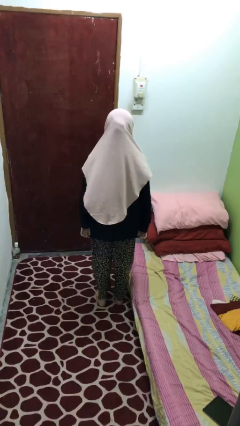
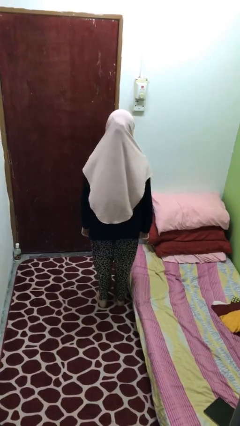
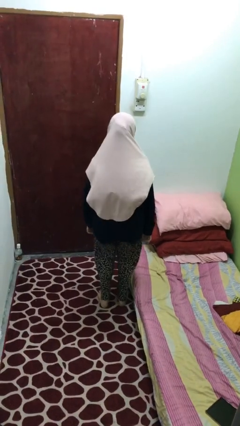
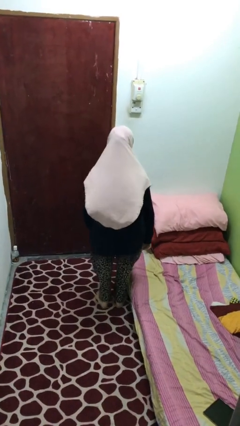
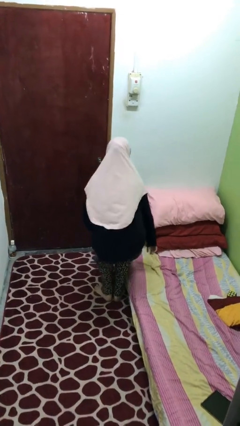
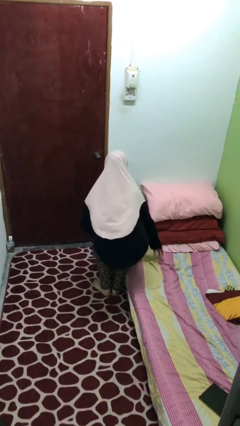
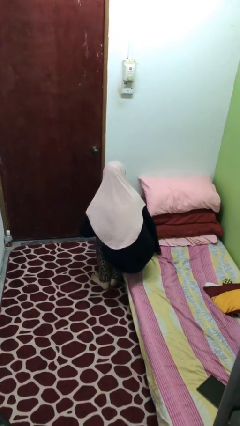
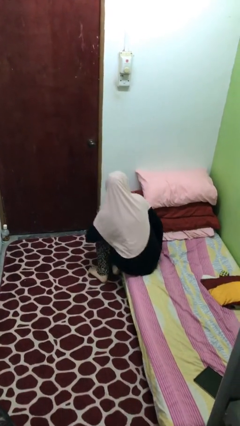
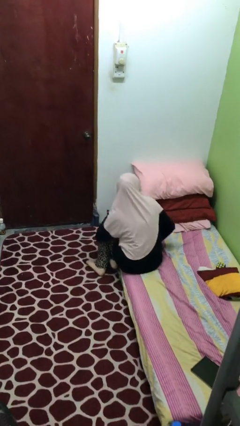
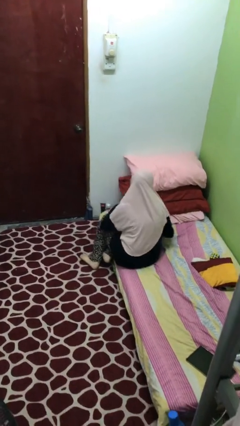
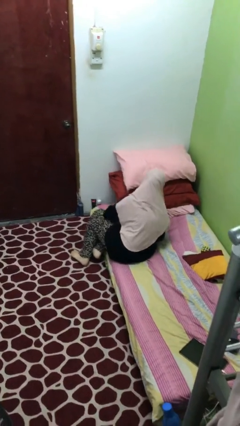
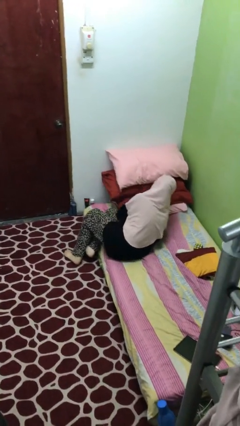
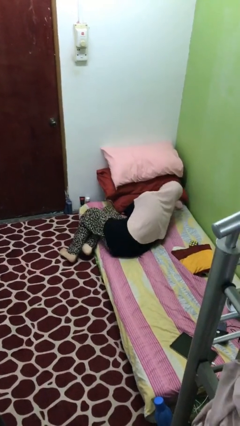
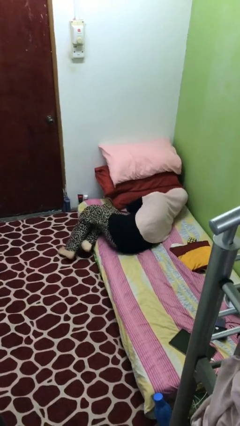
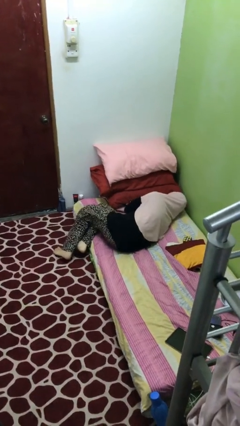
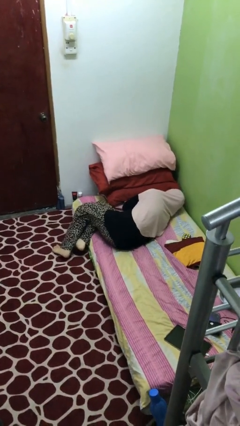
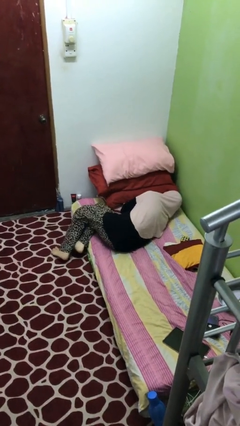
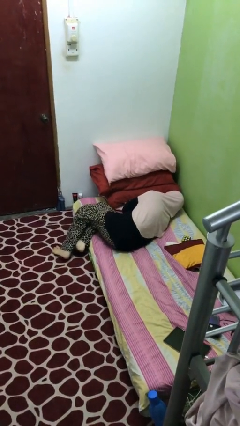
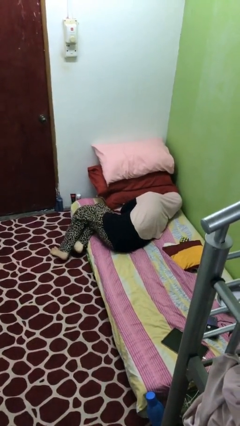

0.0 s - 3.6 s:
person lies down on bed

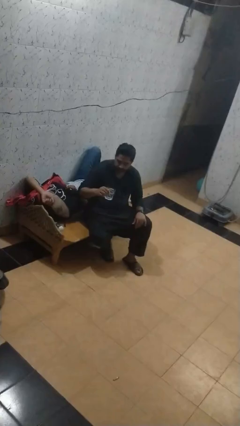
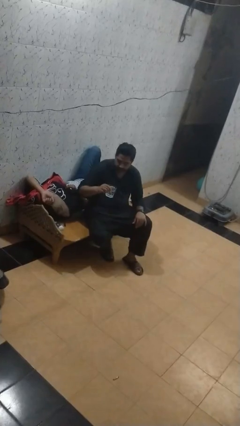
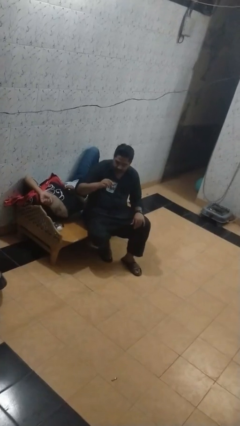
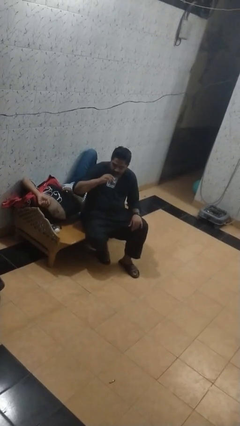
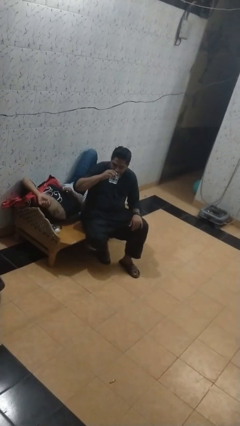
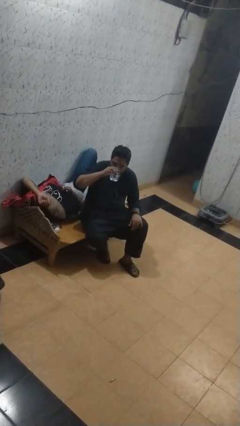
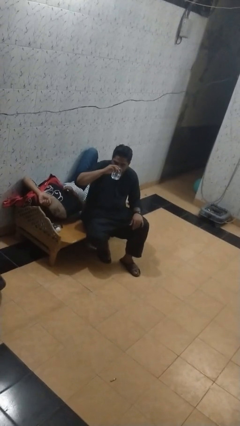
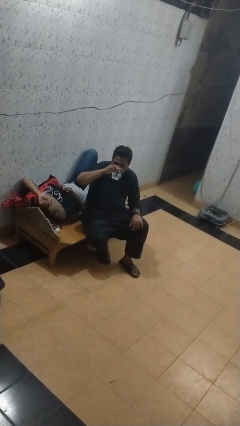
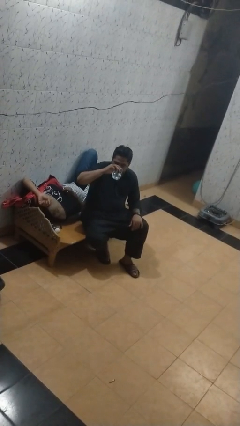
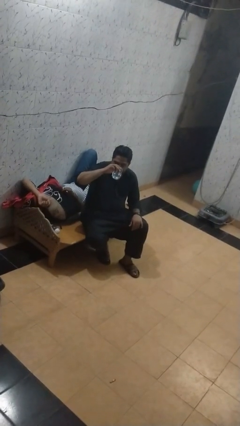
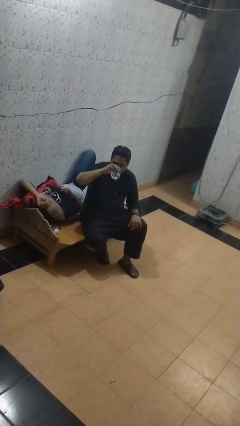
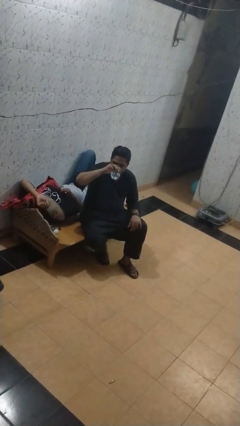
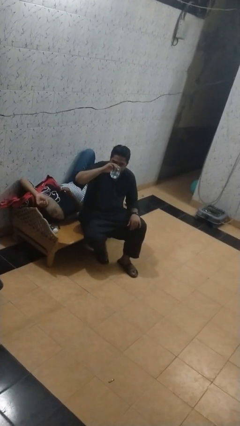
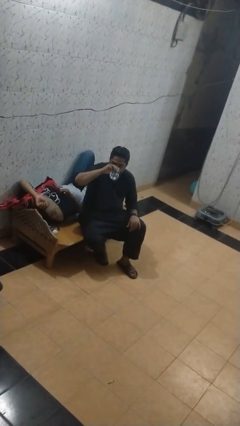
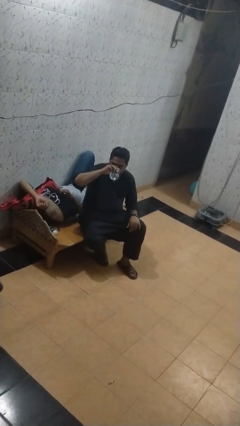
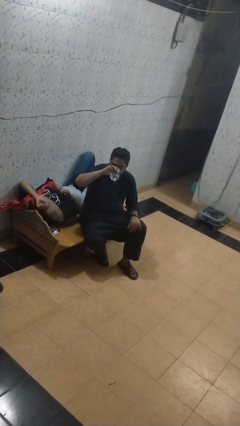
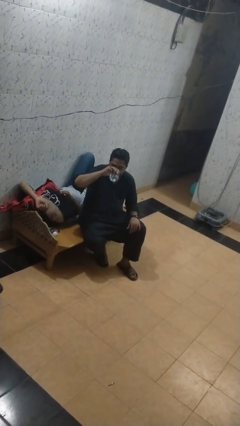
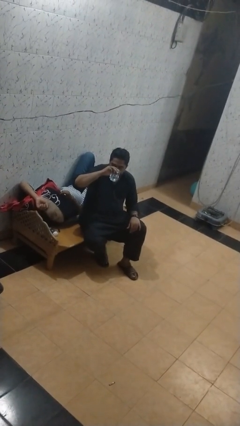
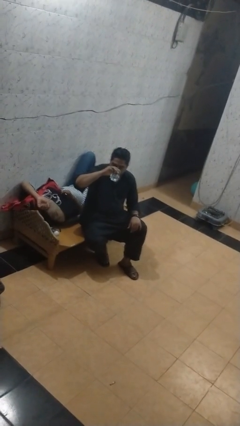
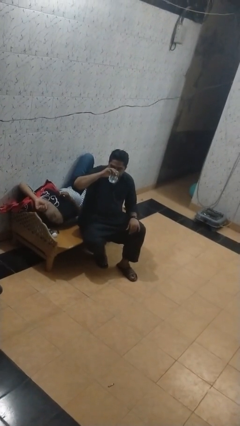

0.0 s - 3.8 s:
person drinks from mug

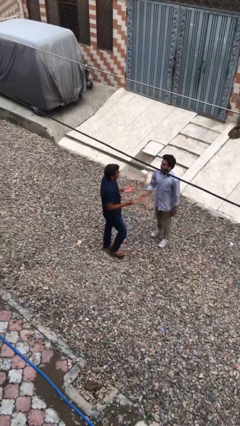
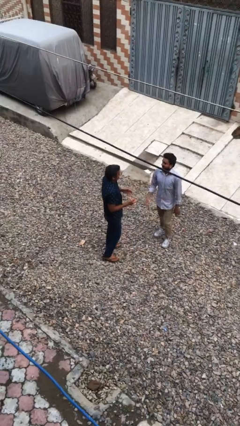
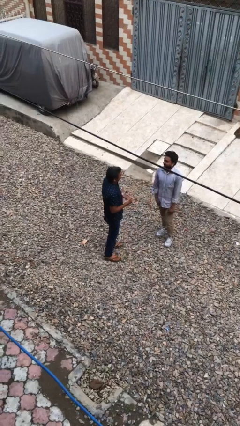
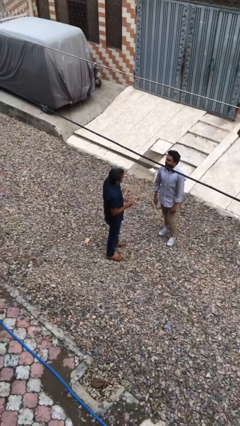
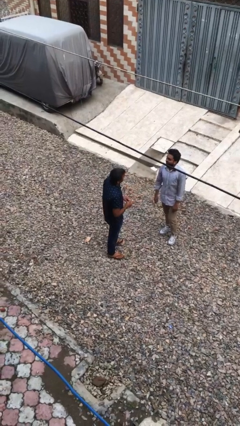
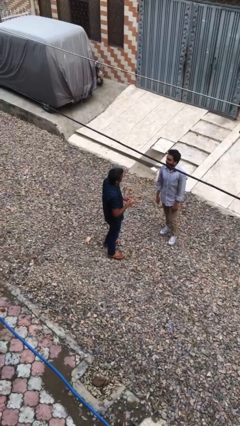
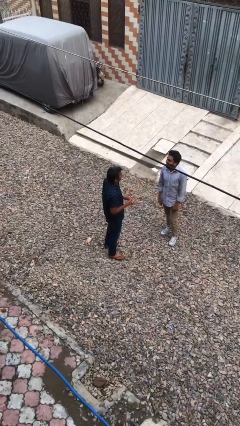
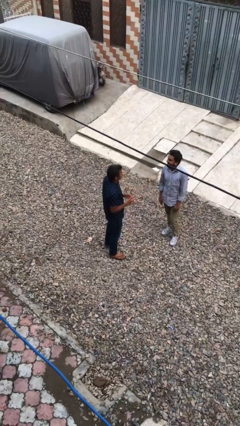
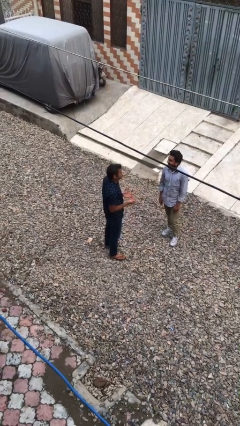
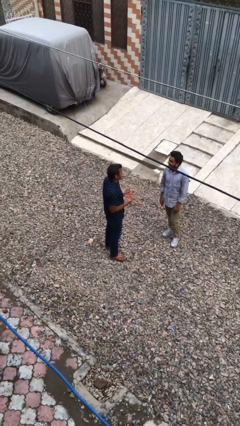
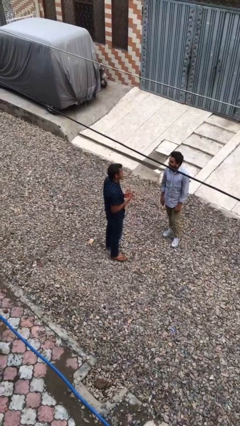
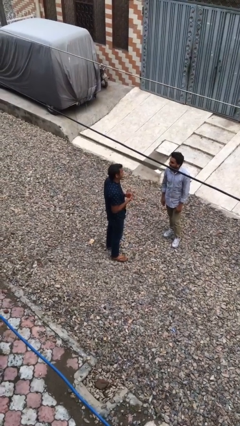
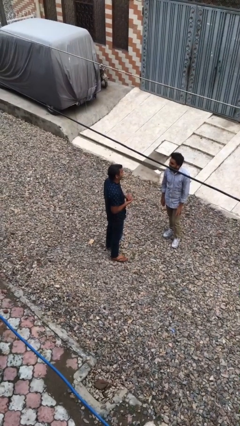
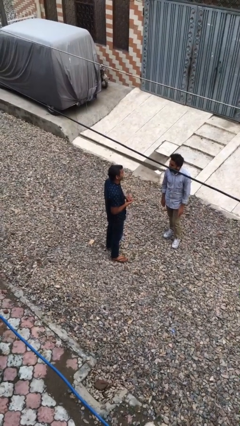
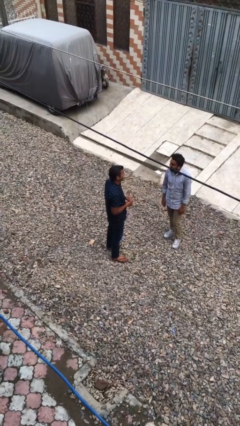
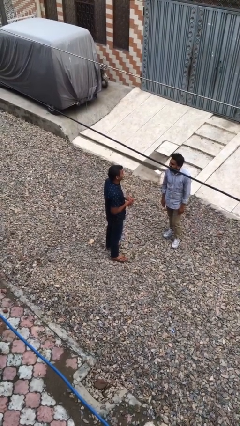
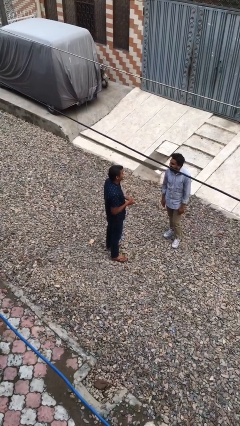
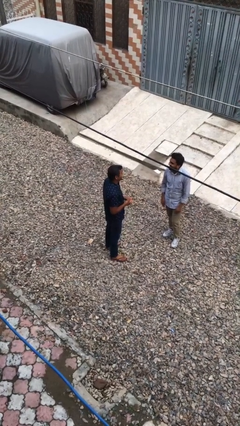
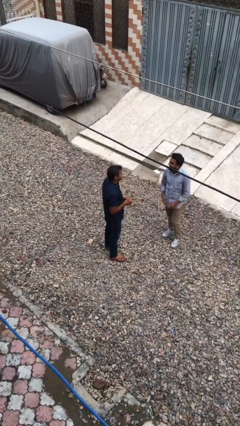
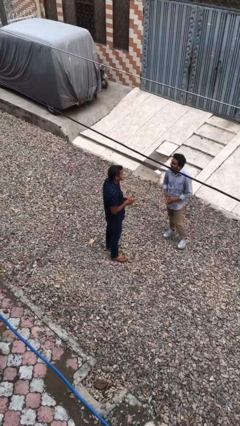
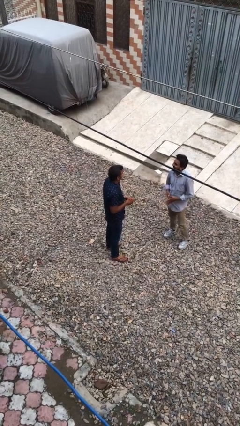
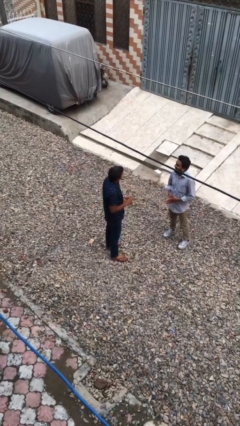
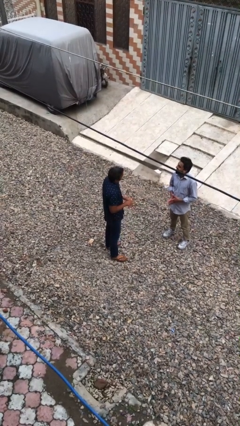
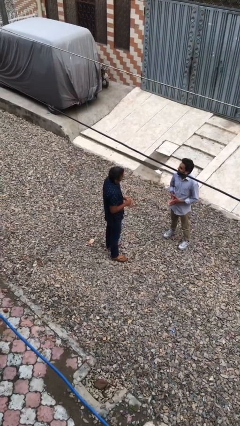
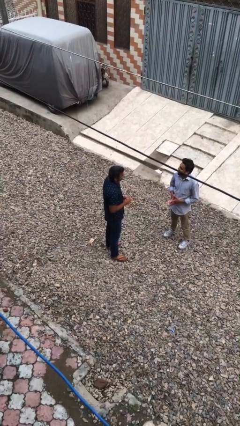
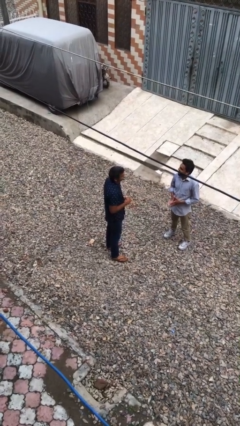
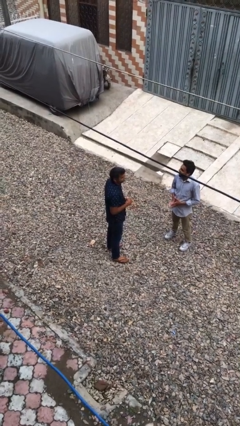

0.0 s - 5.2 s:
person talks to person

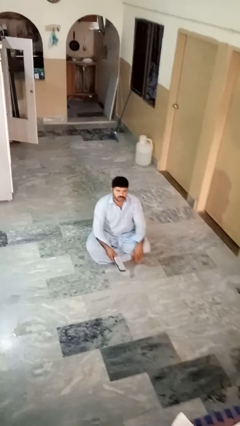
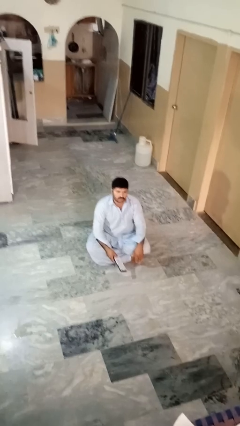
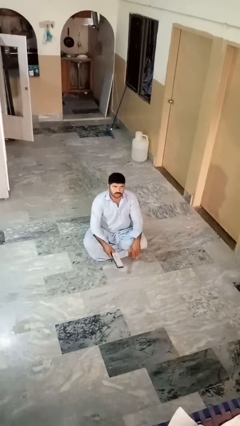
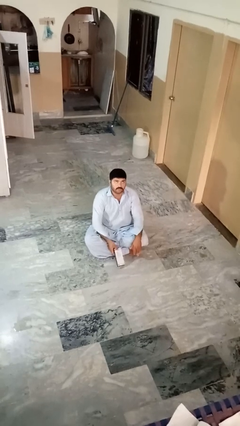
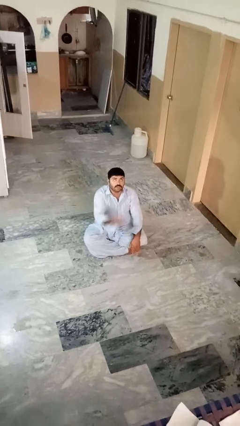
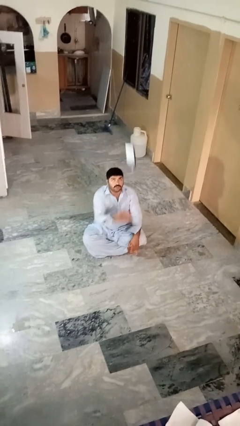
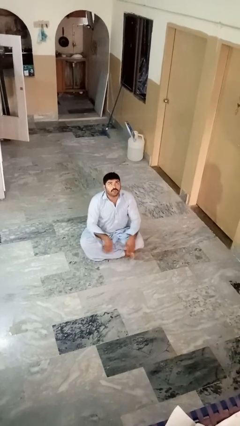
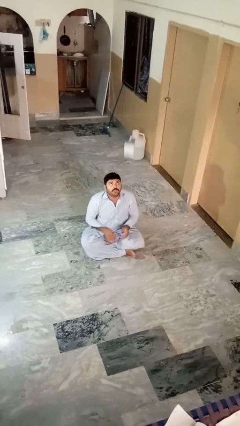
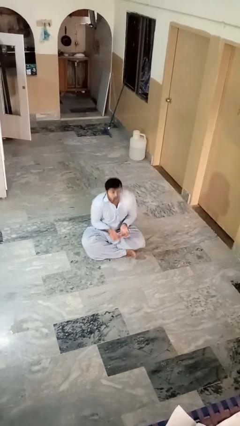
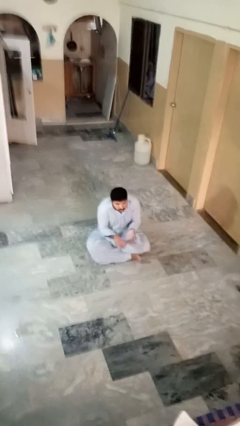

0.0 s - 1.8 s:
person drops object

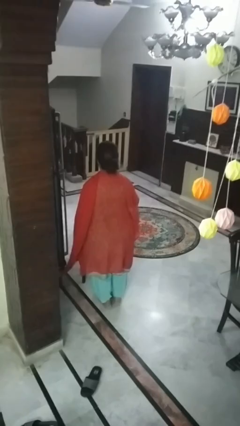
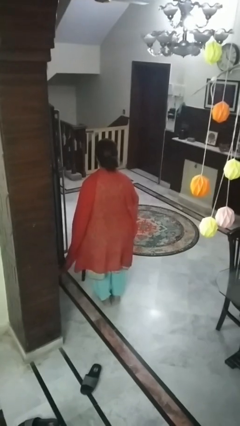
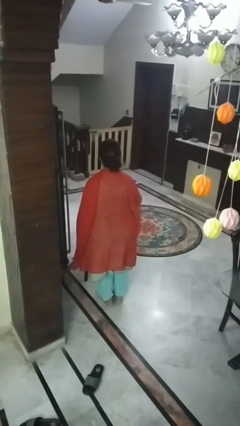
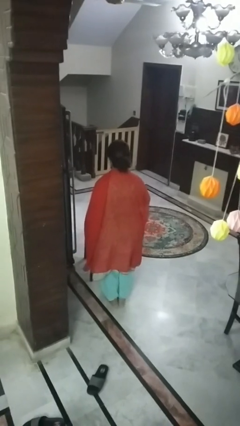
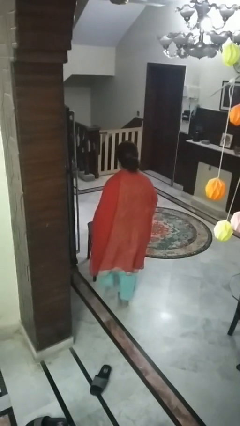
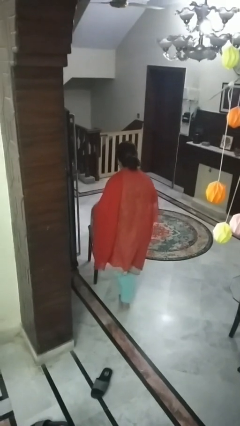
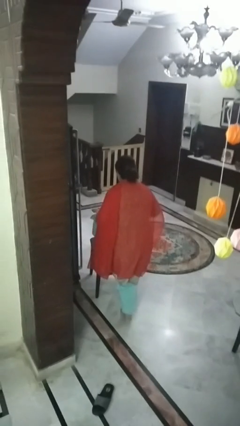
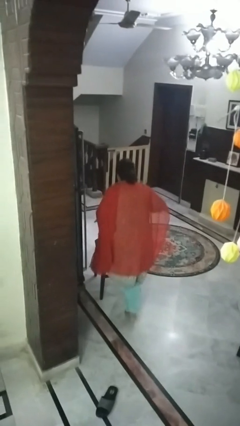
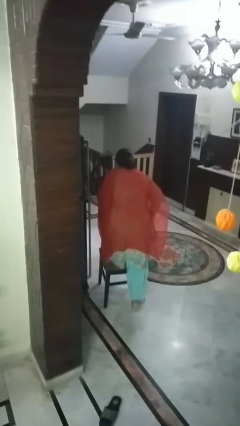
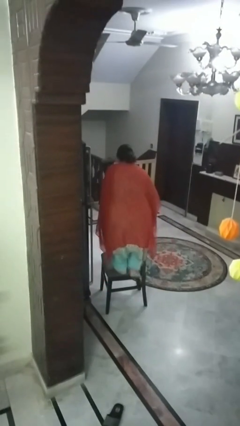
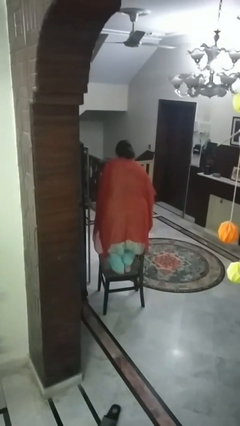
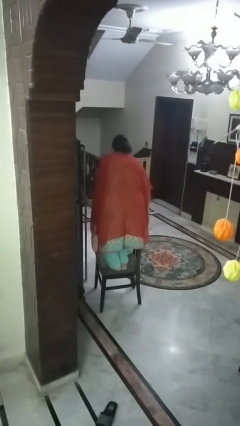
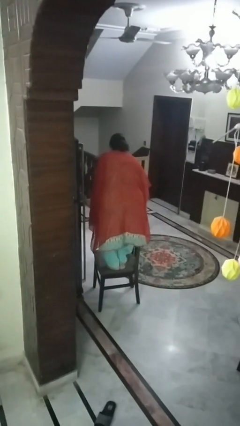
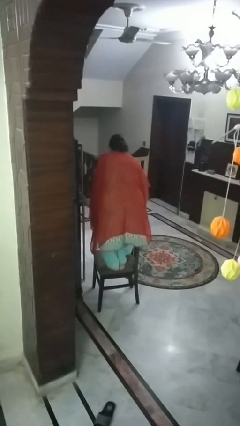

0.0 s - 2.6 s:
person climbs on chair

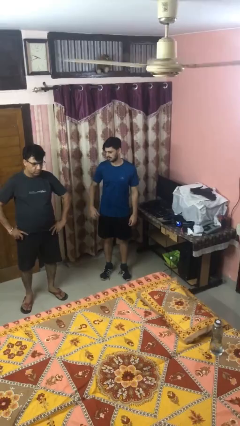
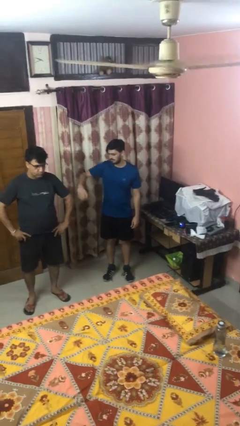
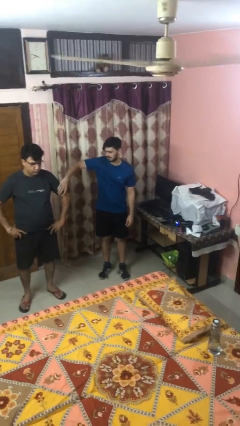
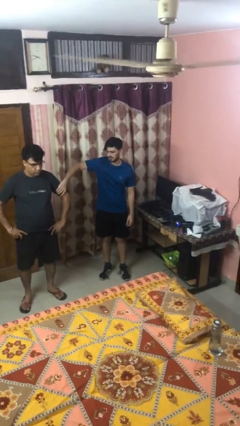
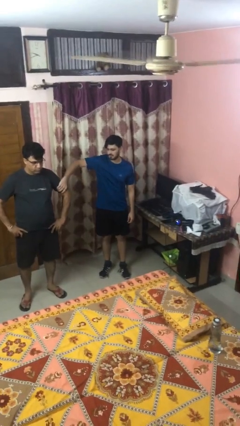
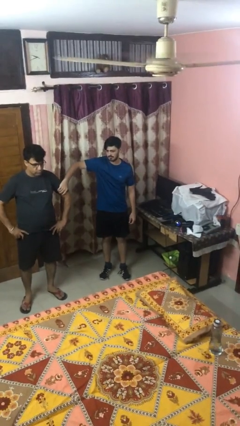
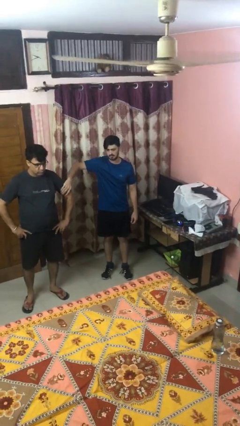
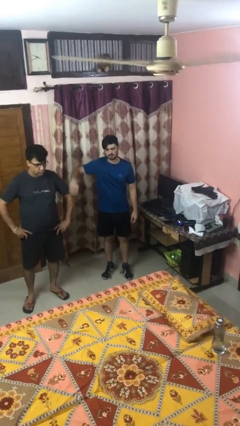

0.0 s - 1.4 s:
person grabs person by bicep
